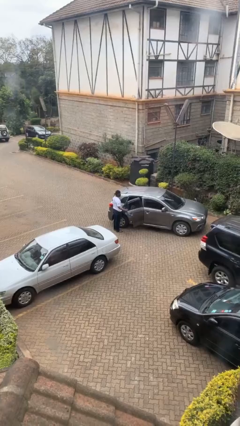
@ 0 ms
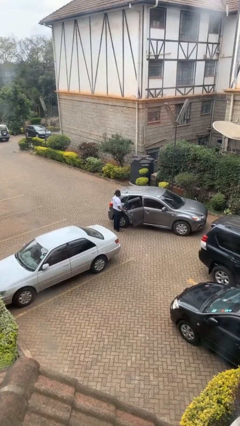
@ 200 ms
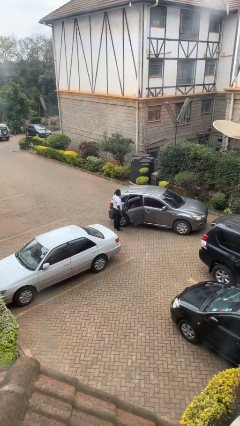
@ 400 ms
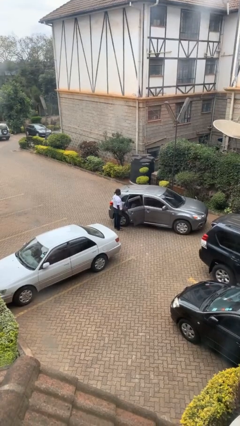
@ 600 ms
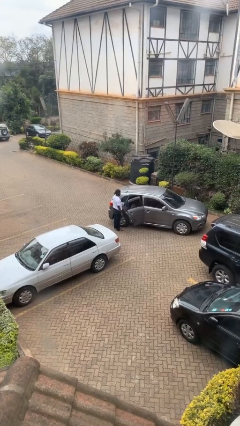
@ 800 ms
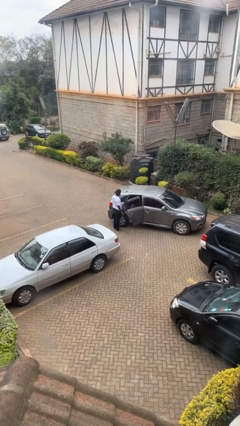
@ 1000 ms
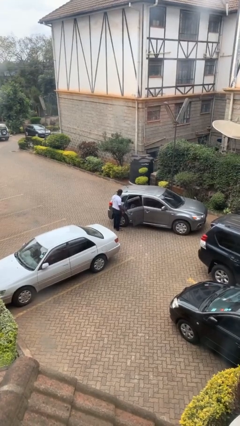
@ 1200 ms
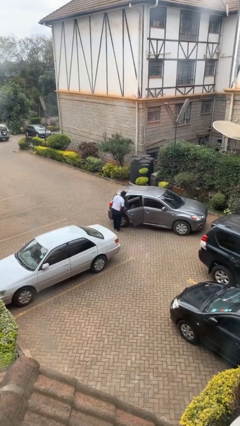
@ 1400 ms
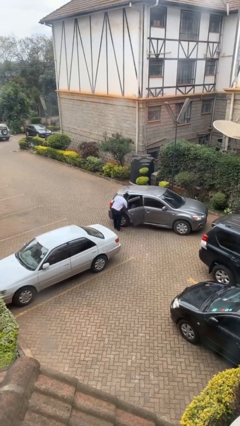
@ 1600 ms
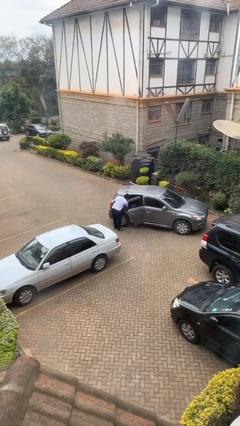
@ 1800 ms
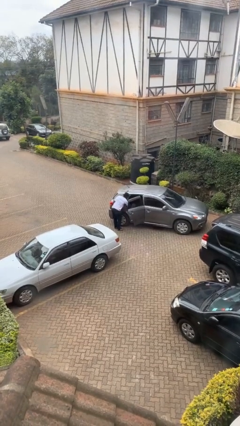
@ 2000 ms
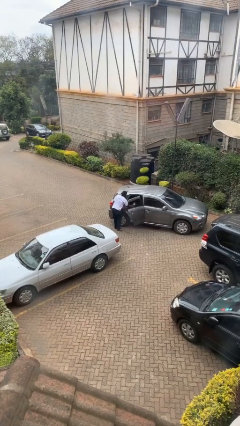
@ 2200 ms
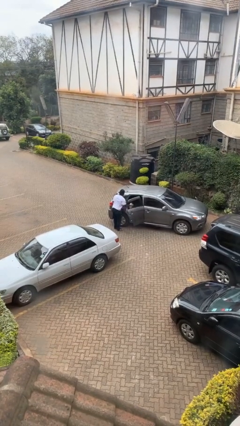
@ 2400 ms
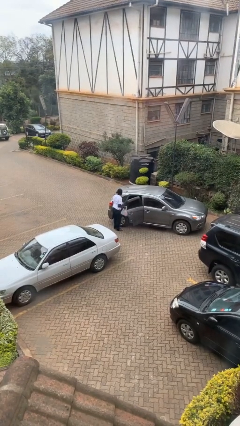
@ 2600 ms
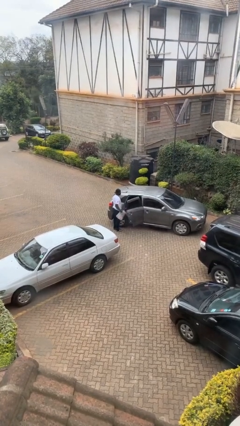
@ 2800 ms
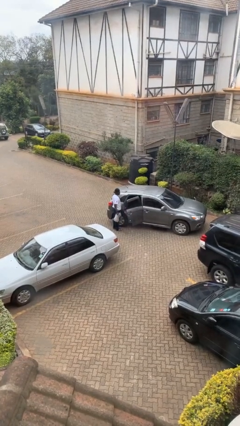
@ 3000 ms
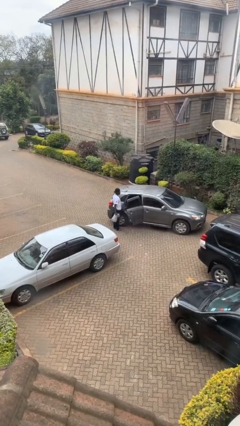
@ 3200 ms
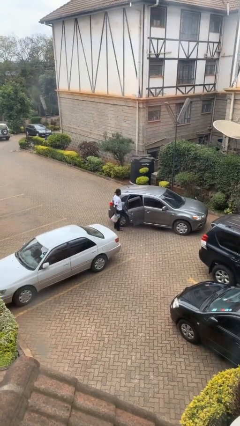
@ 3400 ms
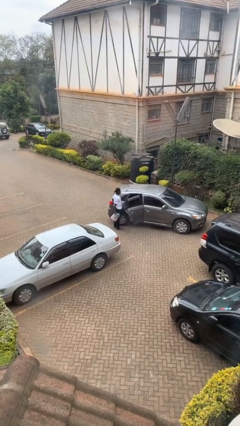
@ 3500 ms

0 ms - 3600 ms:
person unloads car

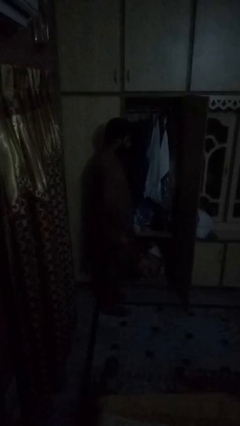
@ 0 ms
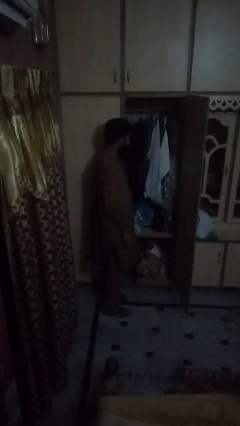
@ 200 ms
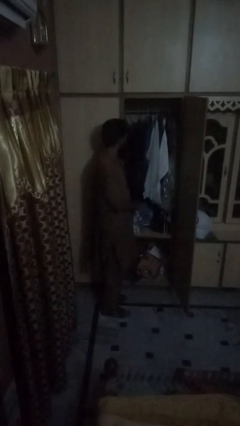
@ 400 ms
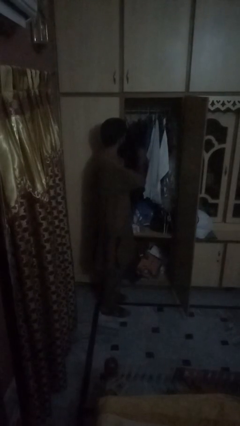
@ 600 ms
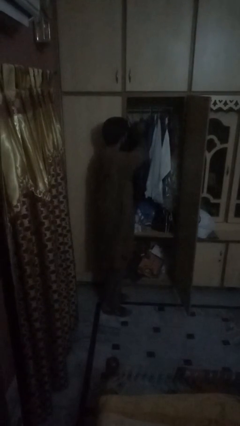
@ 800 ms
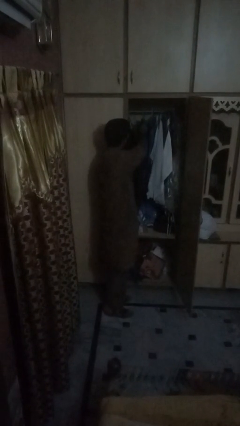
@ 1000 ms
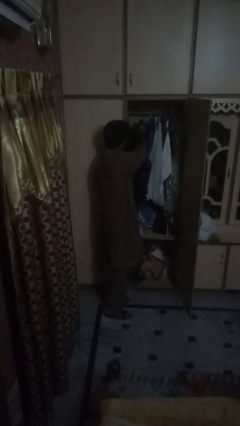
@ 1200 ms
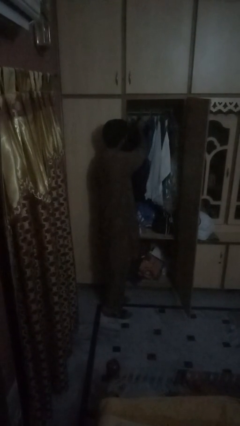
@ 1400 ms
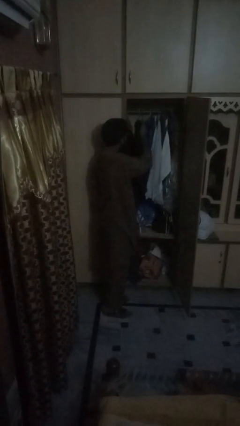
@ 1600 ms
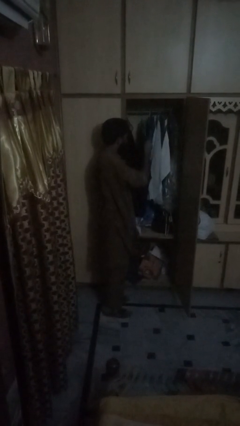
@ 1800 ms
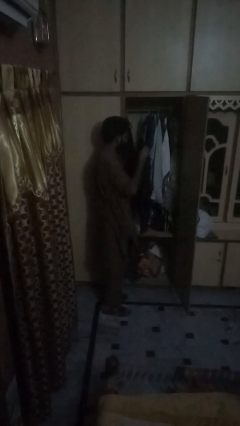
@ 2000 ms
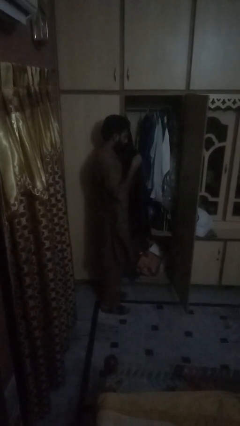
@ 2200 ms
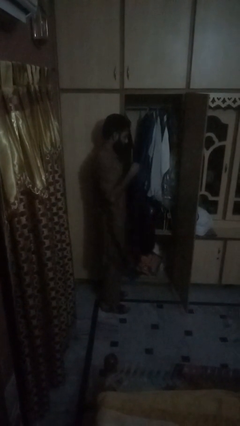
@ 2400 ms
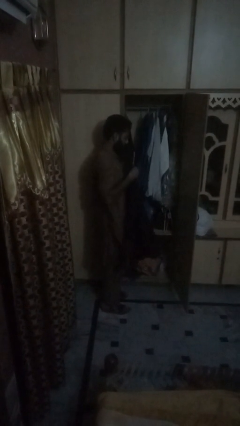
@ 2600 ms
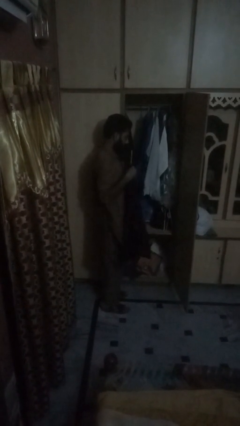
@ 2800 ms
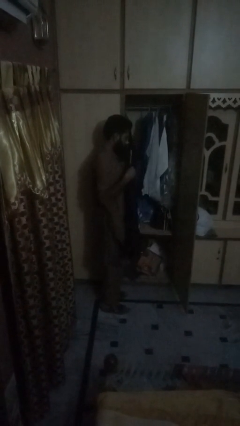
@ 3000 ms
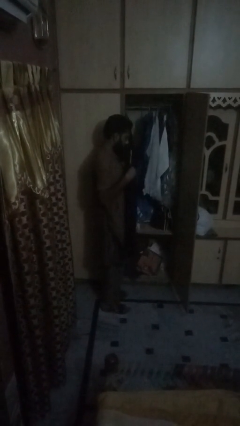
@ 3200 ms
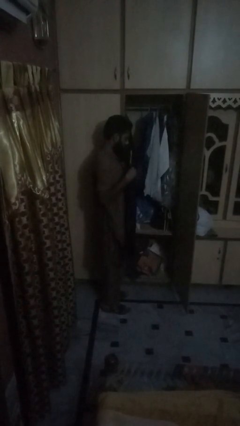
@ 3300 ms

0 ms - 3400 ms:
person puts clothes into dresser

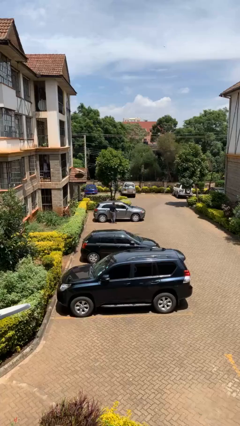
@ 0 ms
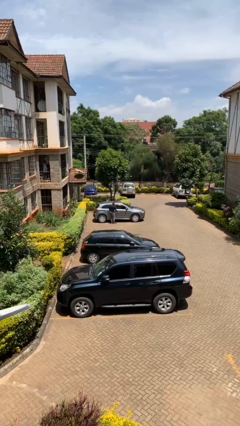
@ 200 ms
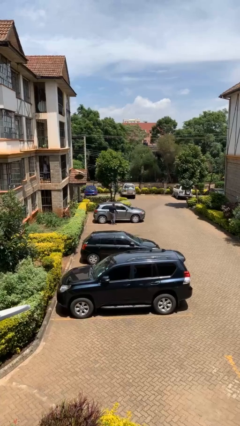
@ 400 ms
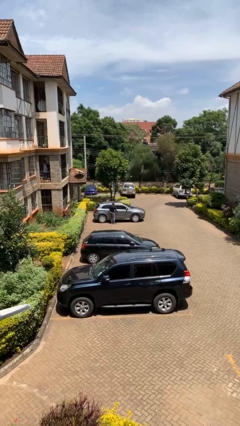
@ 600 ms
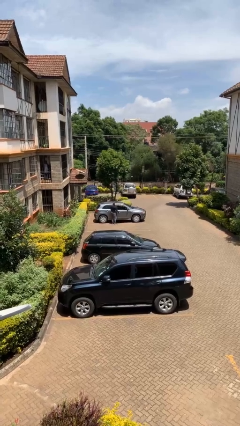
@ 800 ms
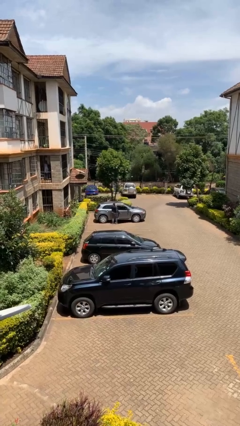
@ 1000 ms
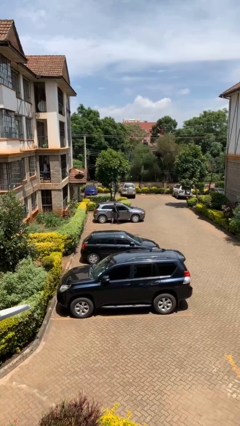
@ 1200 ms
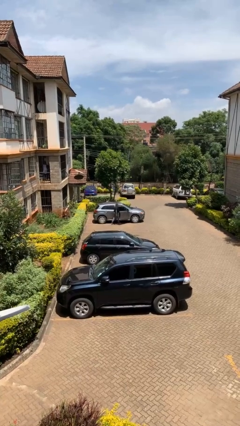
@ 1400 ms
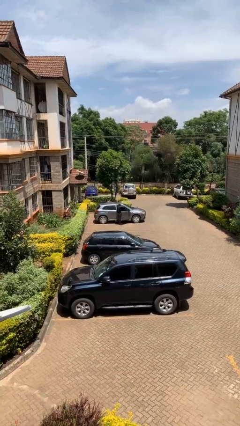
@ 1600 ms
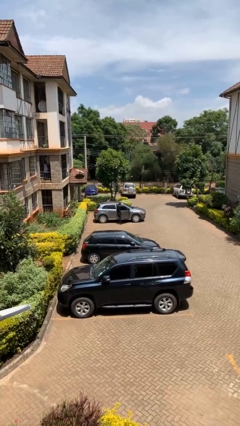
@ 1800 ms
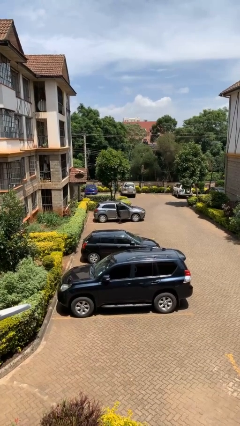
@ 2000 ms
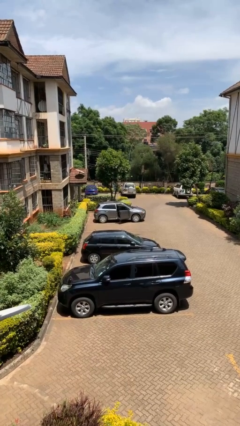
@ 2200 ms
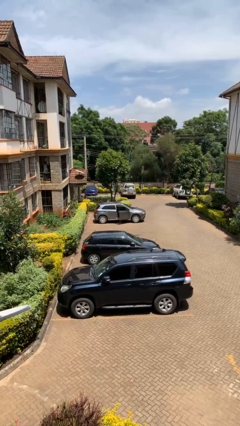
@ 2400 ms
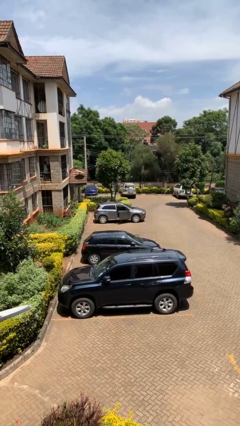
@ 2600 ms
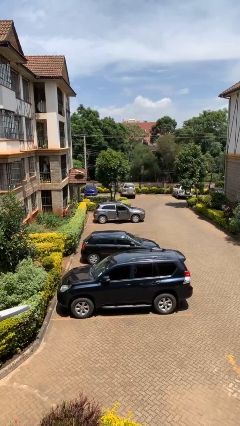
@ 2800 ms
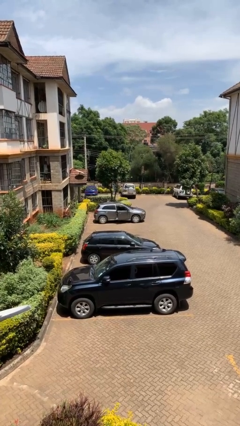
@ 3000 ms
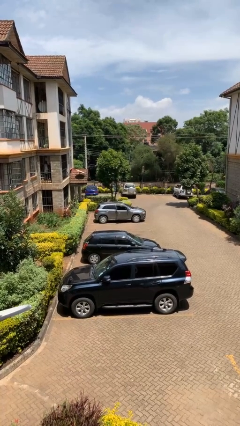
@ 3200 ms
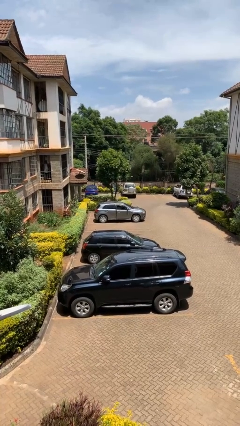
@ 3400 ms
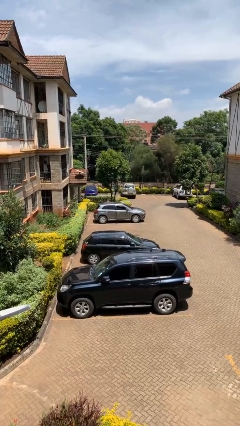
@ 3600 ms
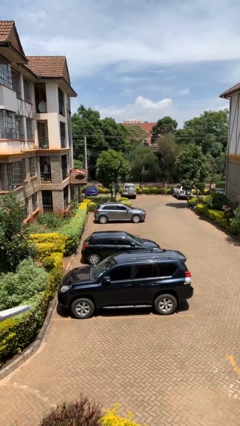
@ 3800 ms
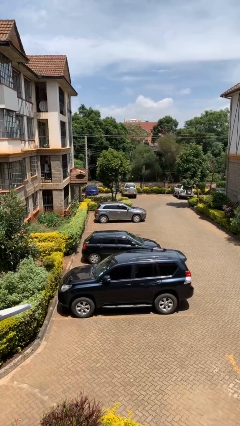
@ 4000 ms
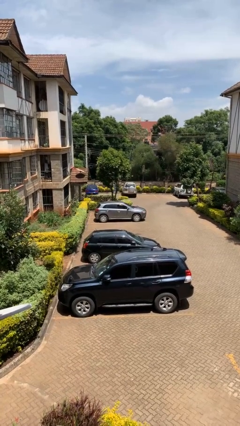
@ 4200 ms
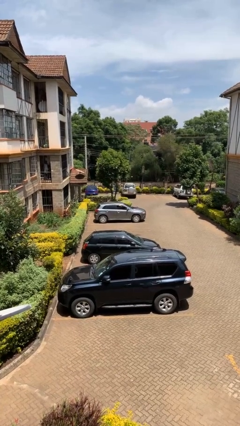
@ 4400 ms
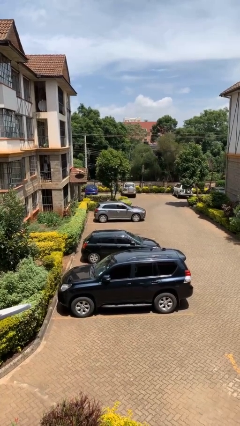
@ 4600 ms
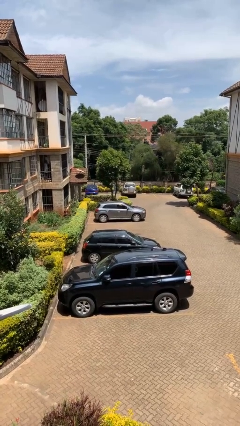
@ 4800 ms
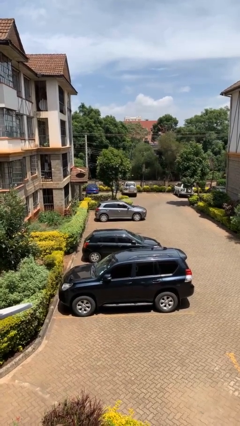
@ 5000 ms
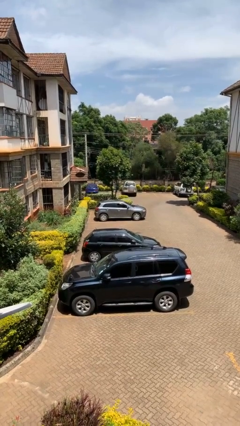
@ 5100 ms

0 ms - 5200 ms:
car picks up person

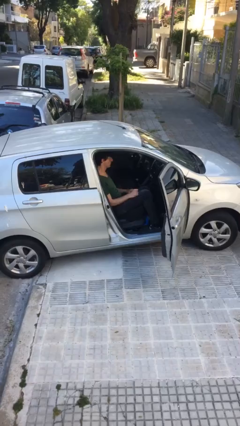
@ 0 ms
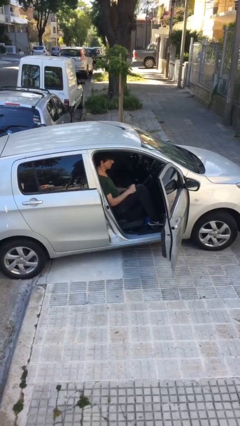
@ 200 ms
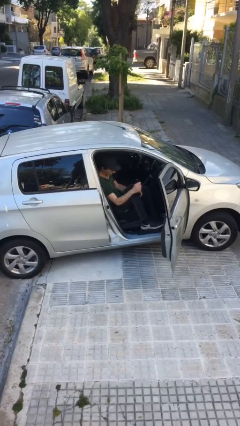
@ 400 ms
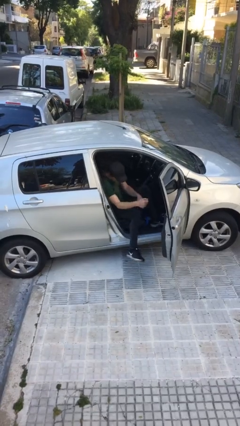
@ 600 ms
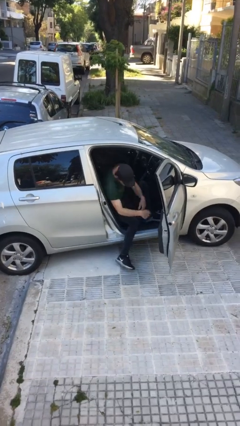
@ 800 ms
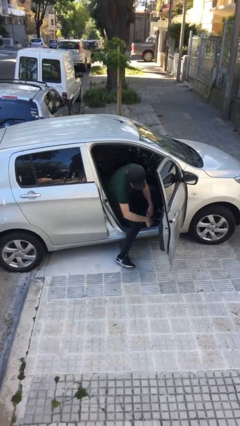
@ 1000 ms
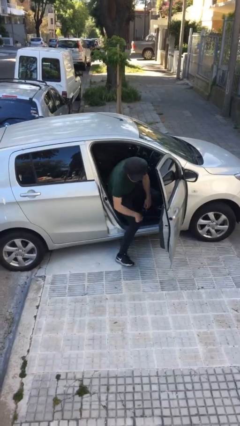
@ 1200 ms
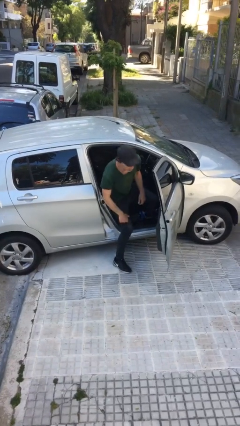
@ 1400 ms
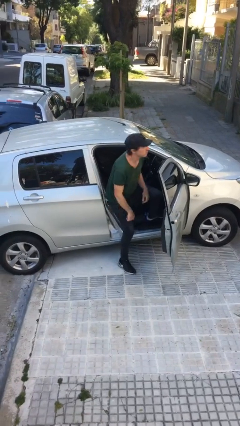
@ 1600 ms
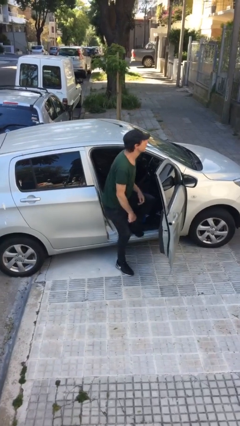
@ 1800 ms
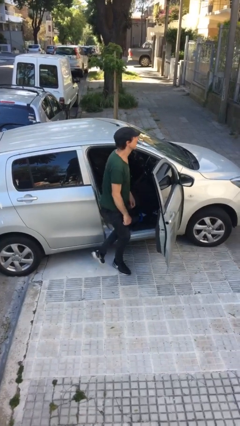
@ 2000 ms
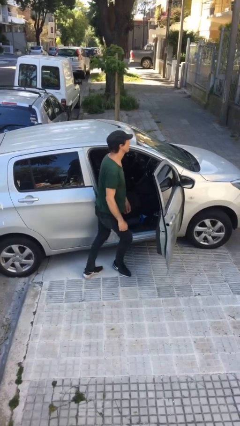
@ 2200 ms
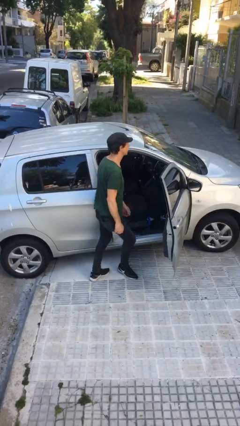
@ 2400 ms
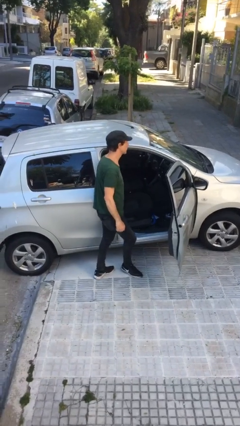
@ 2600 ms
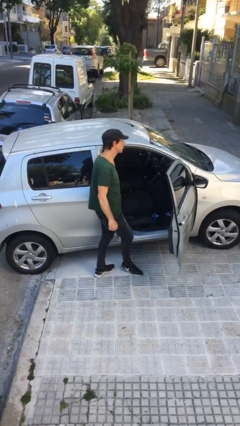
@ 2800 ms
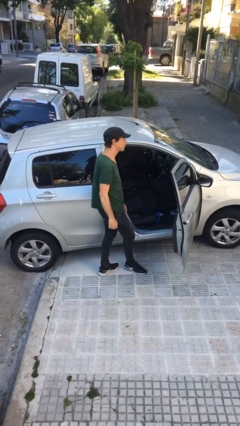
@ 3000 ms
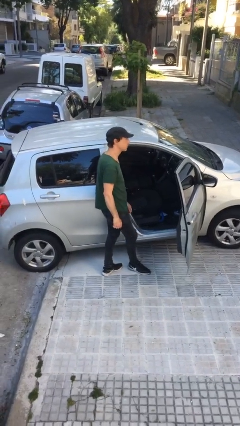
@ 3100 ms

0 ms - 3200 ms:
person exits car

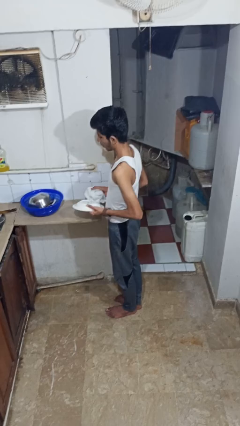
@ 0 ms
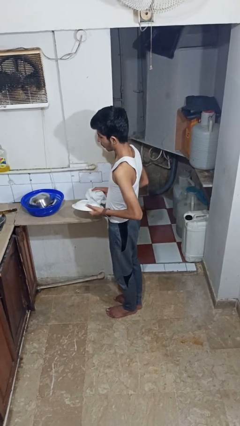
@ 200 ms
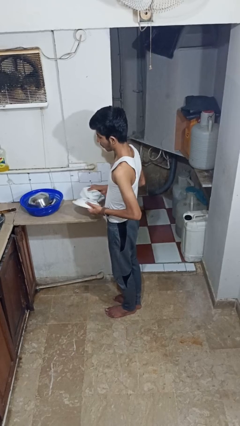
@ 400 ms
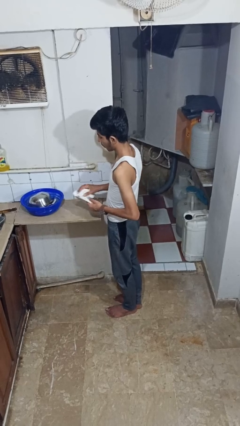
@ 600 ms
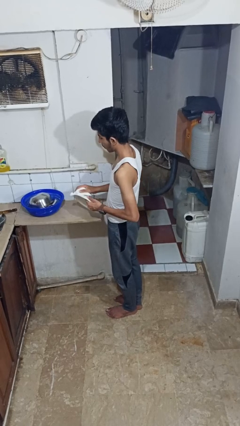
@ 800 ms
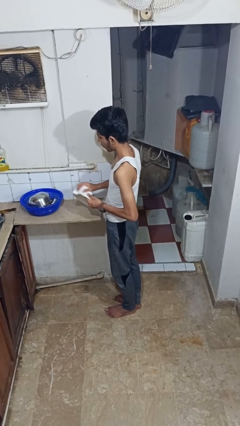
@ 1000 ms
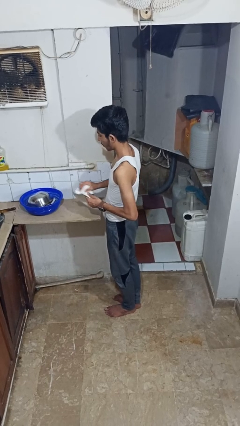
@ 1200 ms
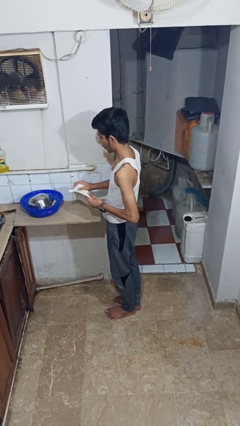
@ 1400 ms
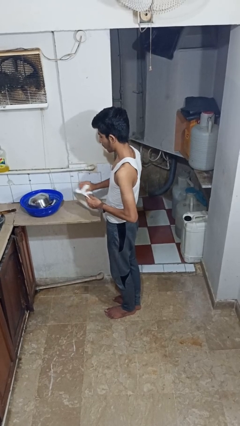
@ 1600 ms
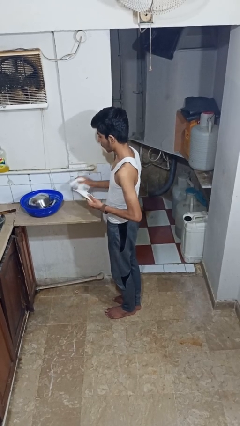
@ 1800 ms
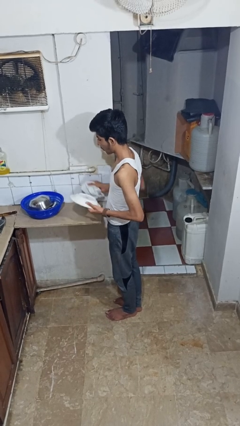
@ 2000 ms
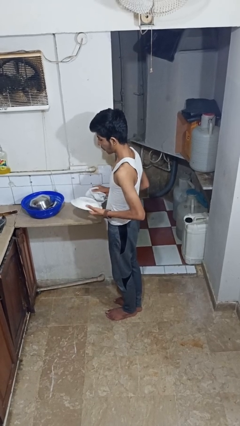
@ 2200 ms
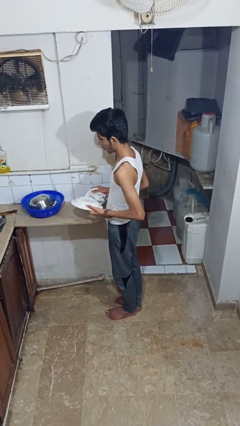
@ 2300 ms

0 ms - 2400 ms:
person dries dish
